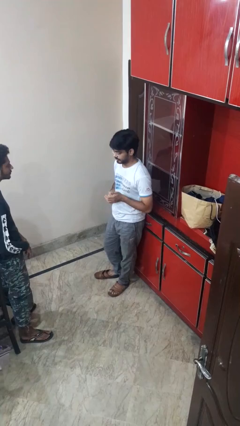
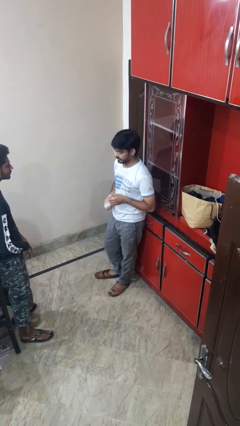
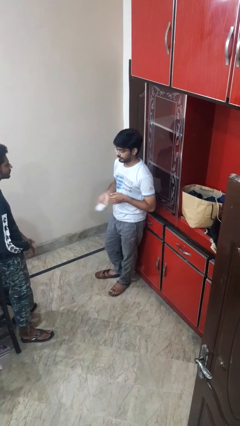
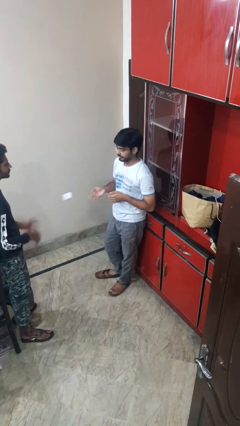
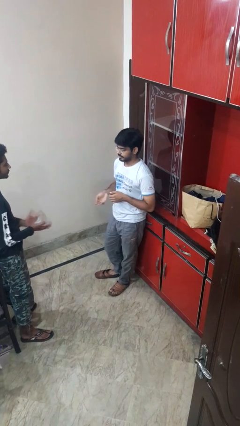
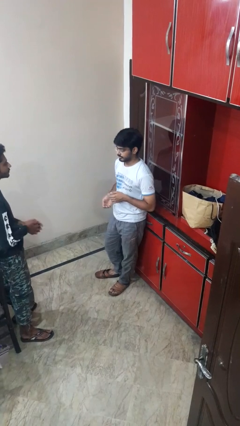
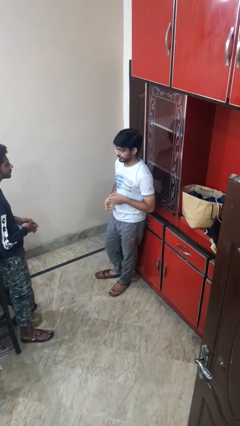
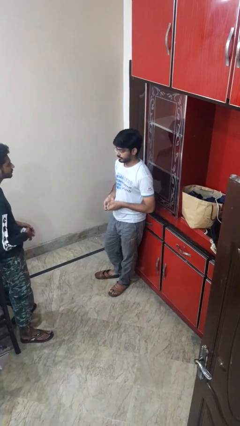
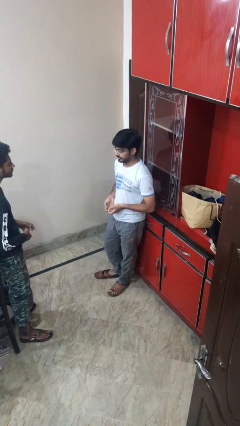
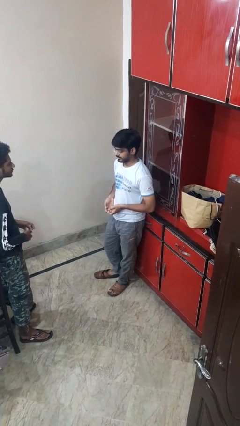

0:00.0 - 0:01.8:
person throws object to person

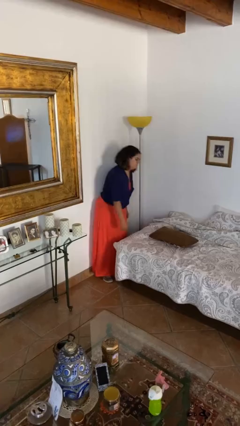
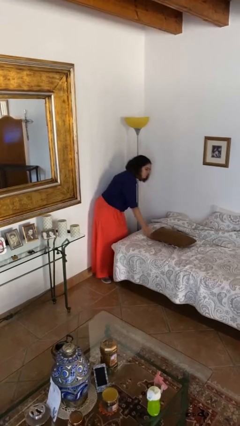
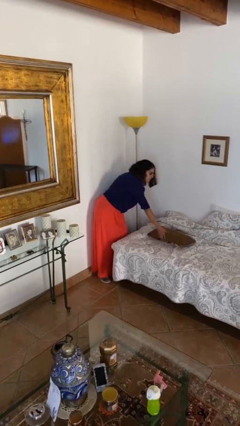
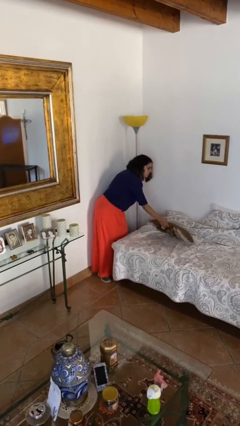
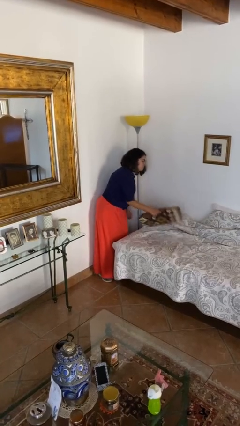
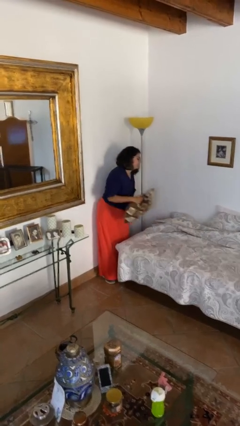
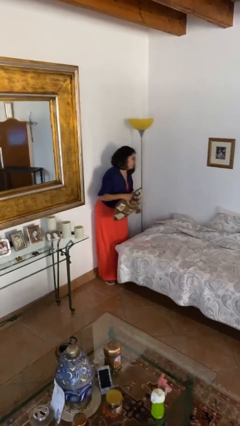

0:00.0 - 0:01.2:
person picks up object from bed

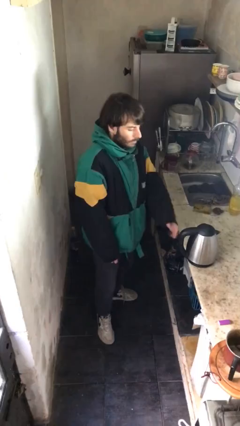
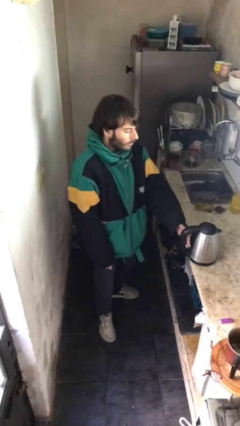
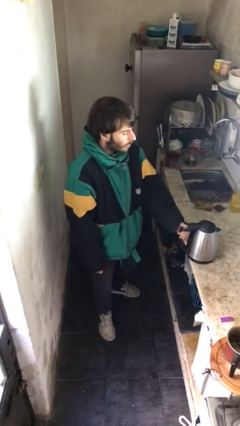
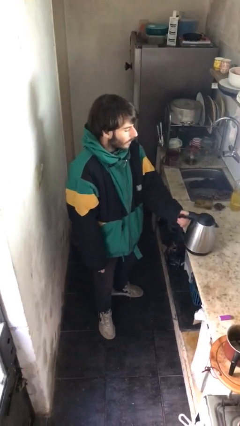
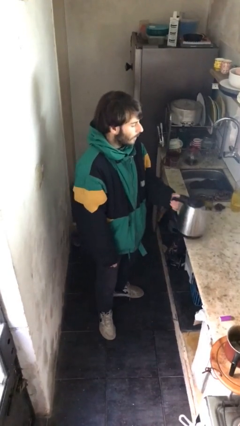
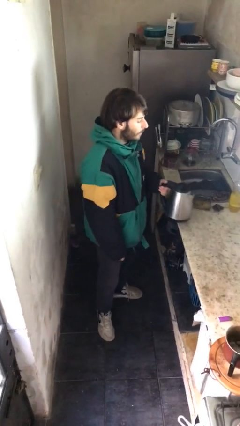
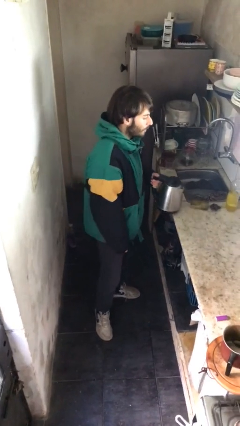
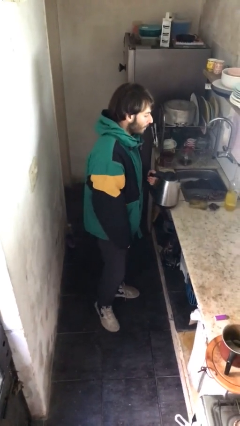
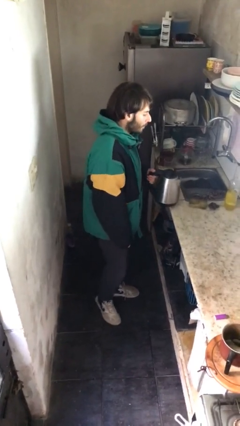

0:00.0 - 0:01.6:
person picks up object from countertop

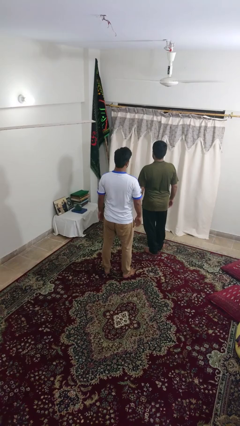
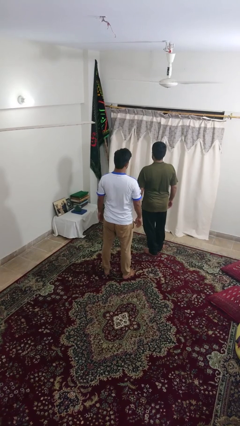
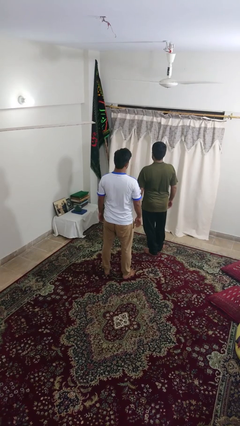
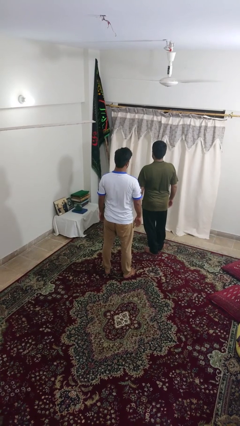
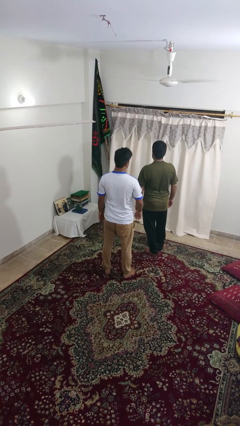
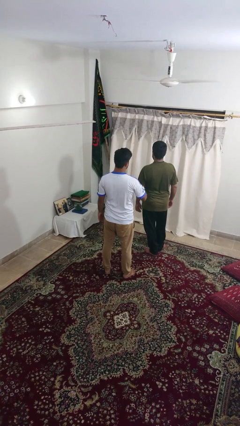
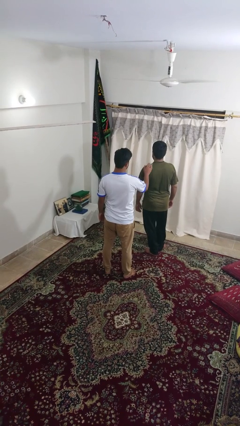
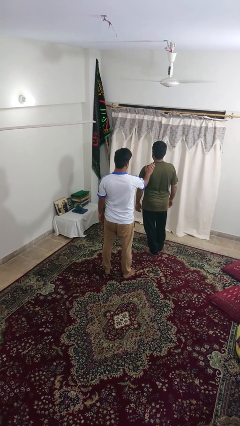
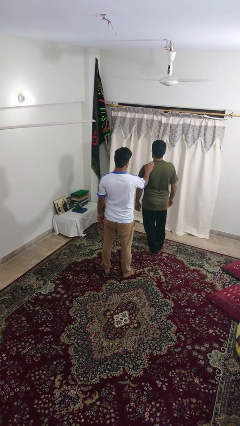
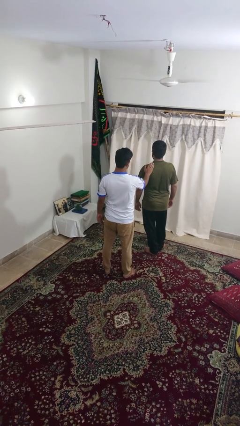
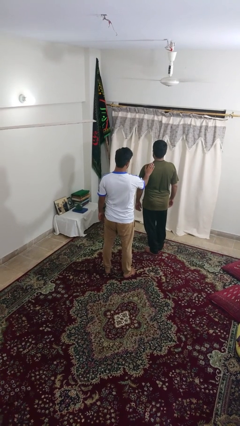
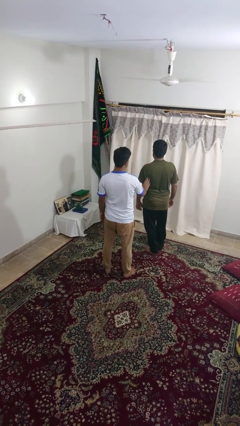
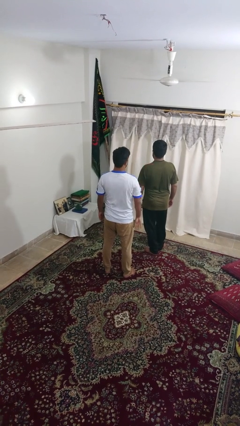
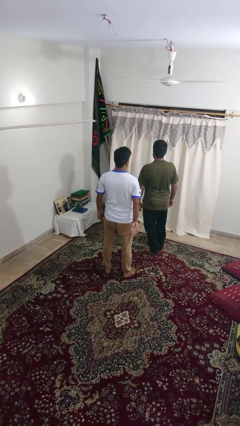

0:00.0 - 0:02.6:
person touches back of person

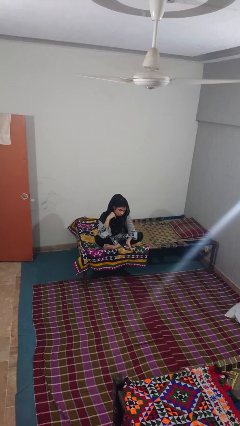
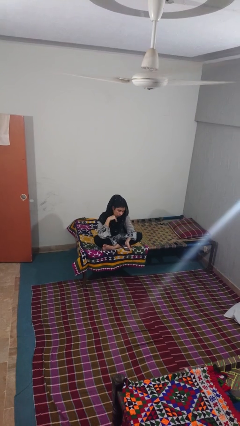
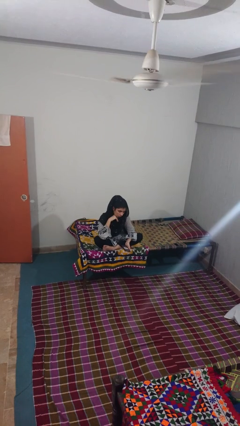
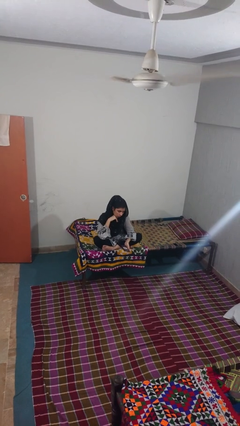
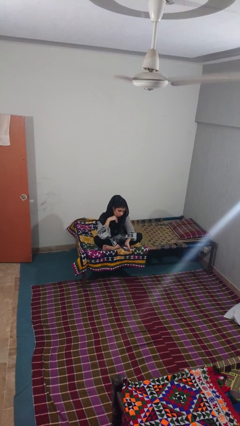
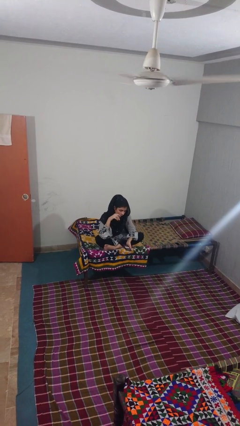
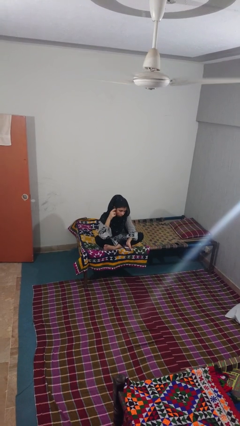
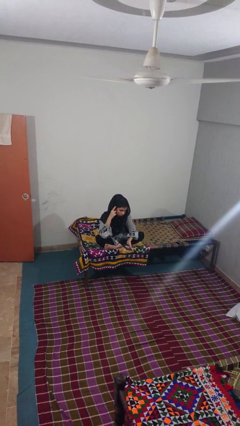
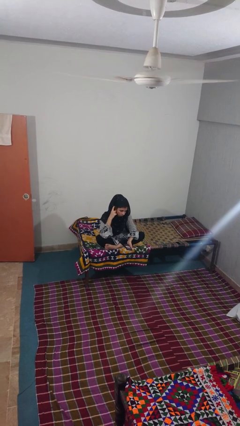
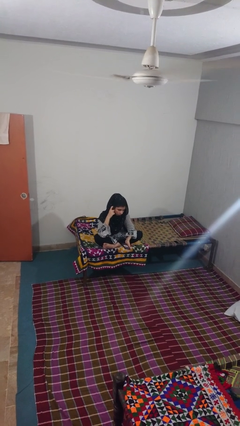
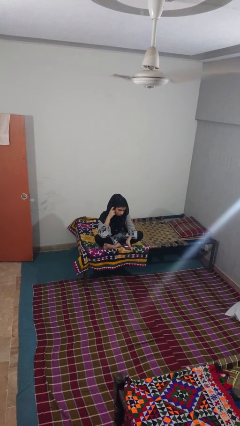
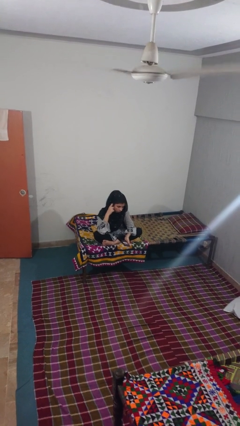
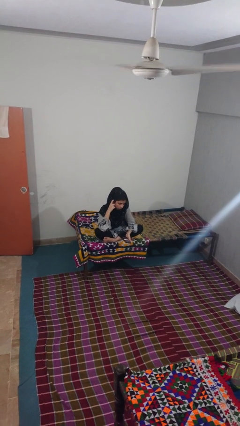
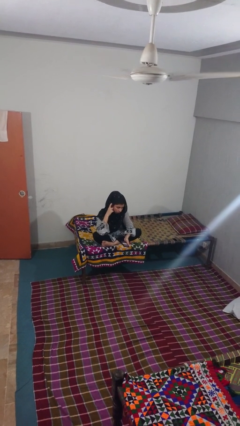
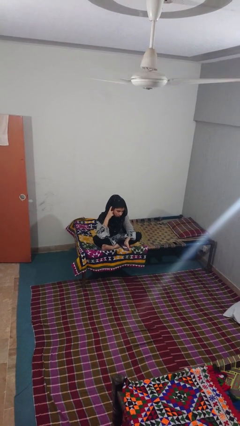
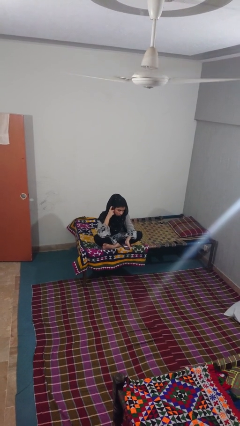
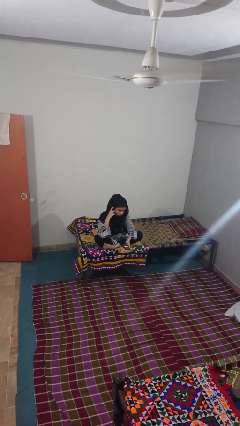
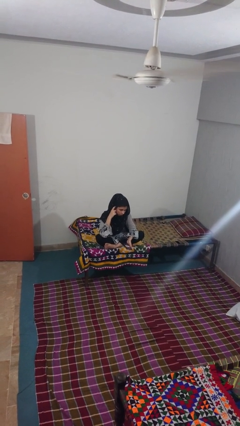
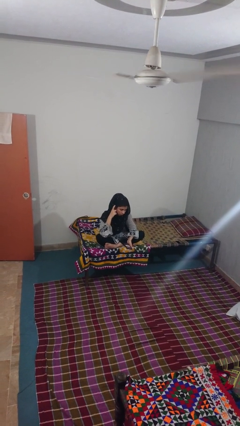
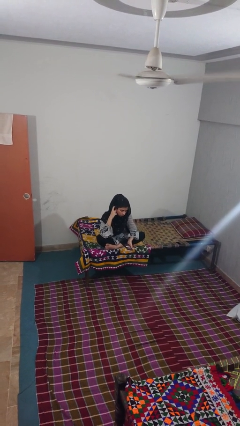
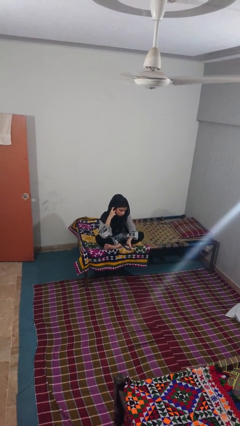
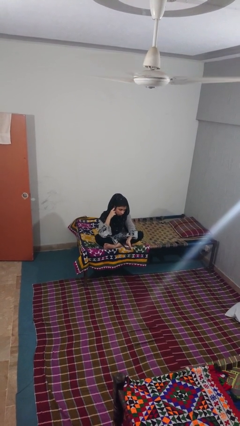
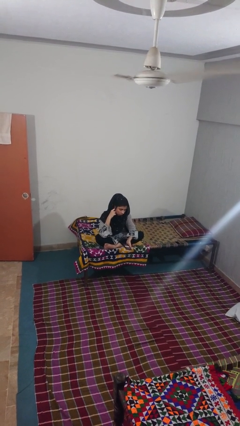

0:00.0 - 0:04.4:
person touches earlobe

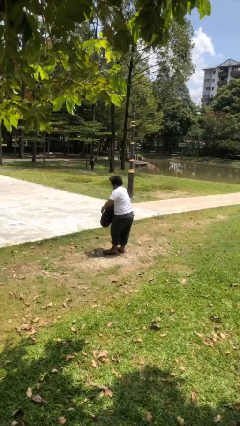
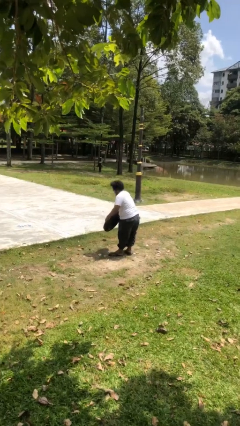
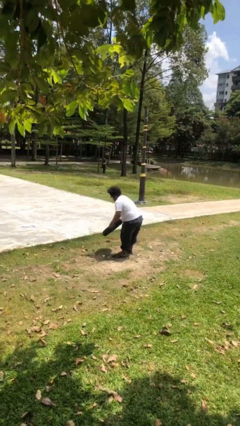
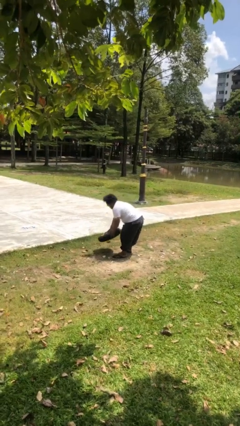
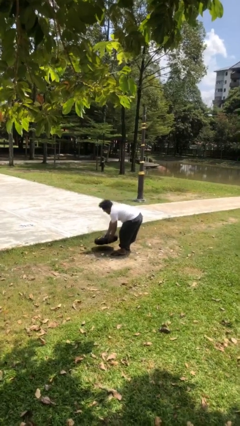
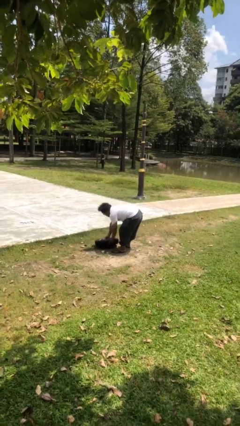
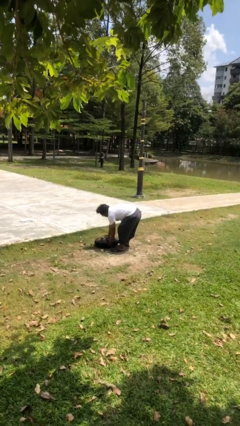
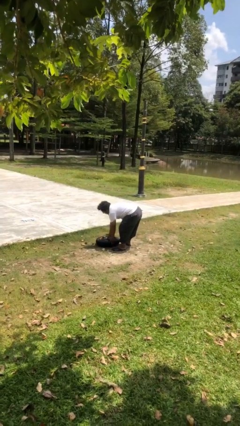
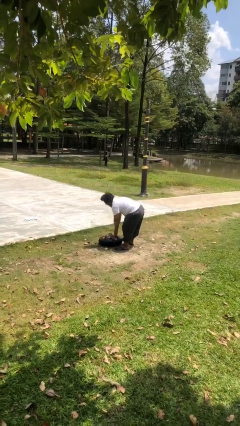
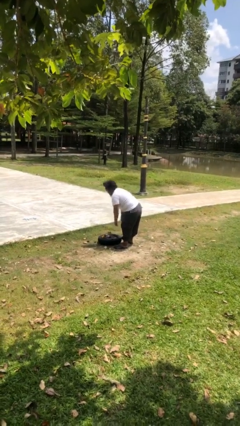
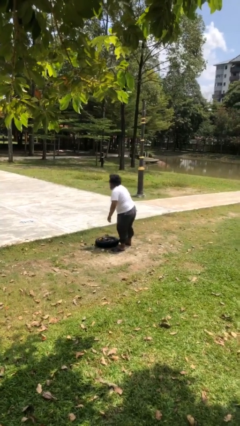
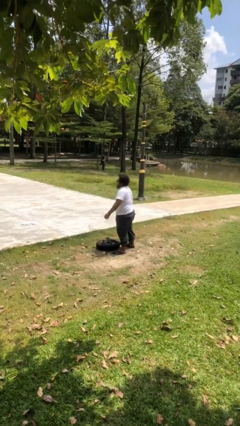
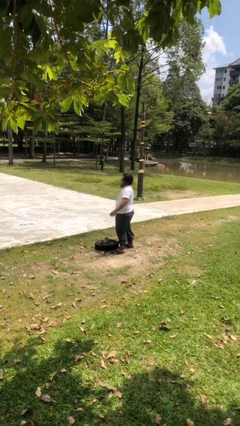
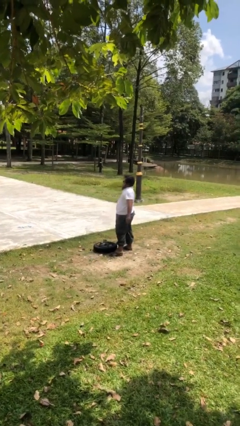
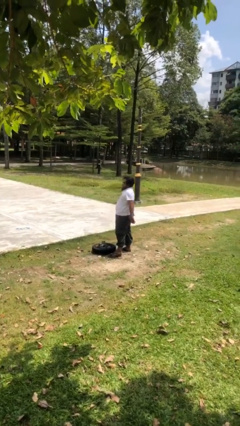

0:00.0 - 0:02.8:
person puts down object on floor

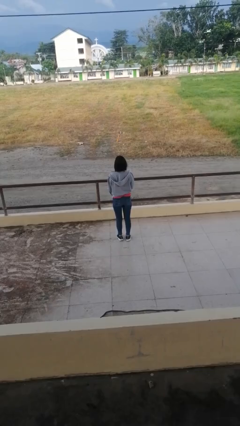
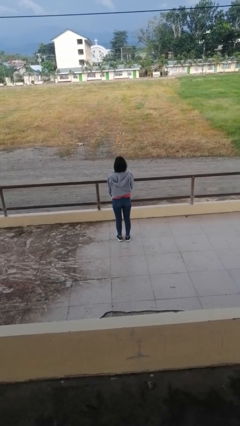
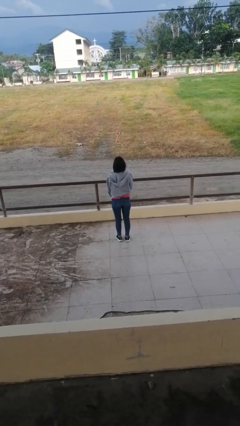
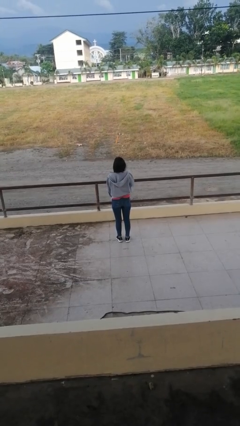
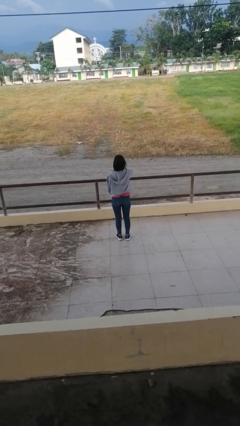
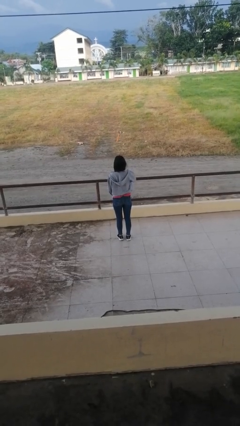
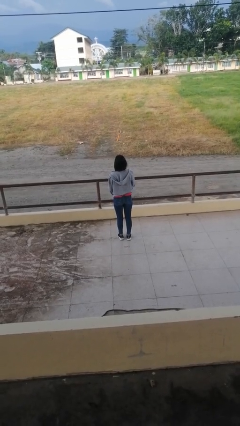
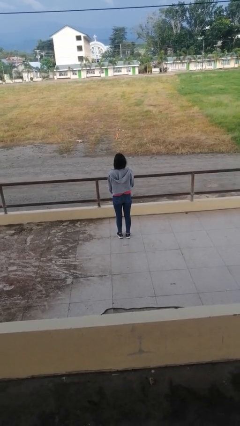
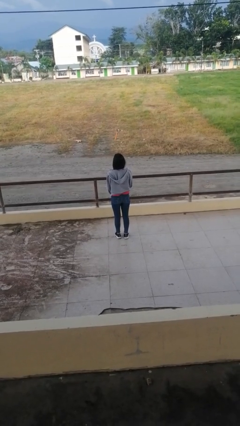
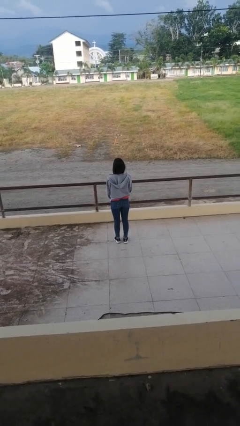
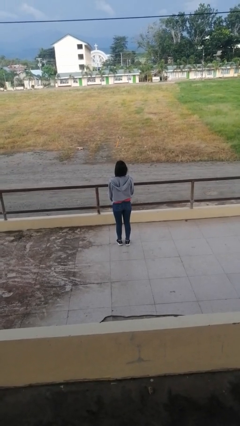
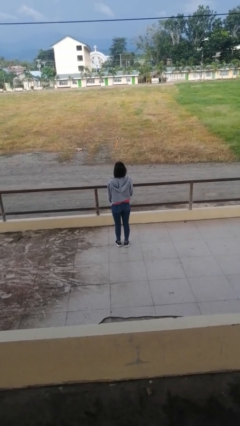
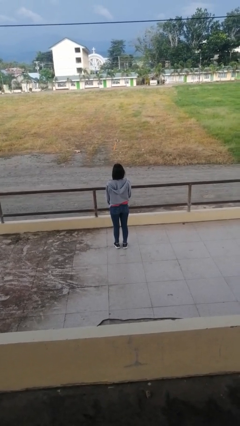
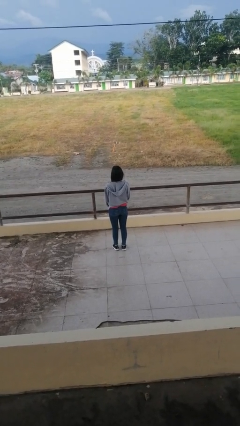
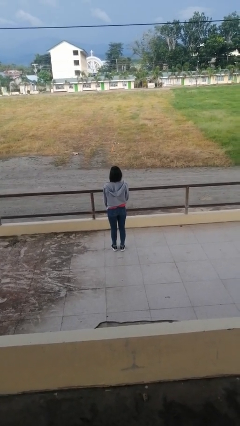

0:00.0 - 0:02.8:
person unzips jacket
